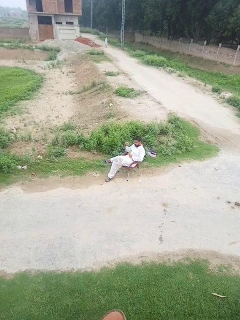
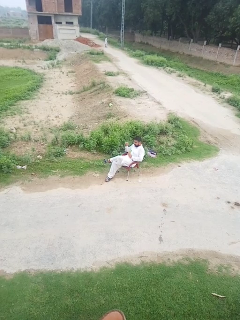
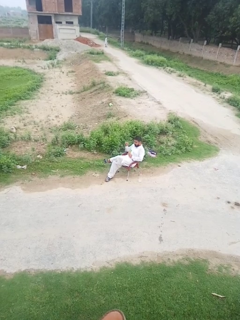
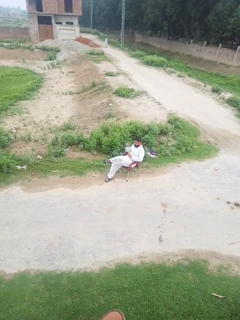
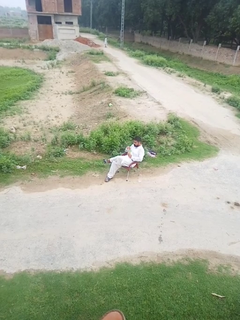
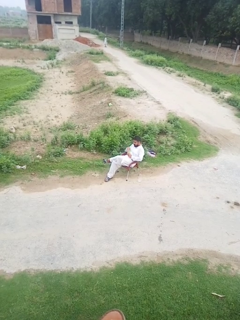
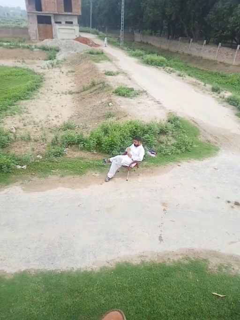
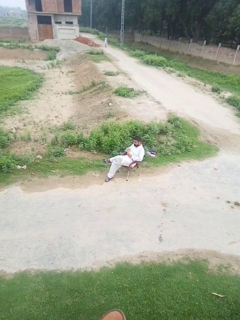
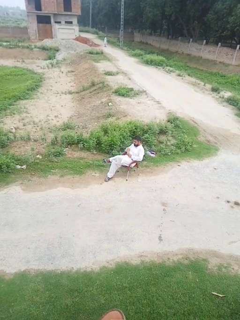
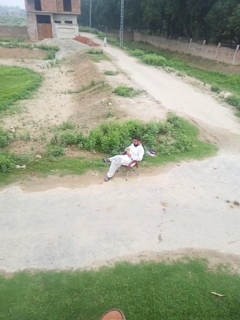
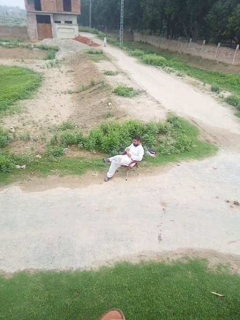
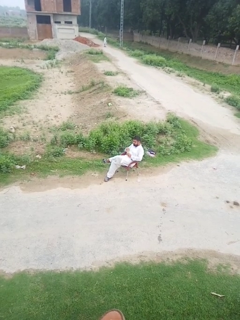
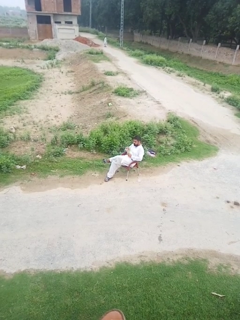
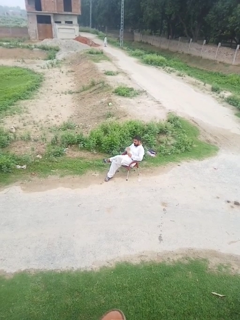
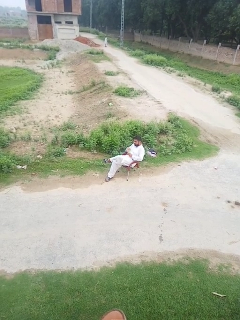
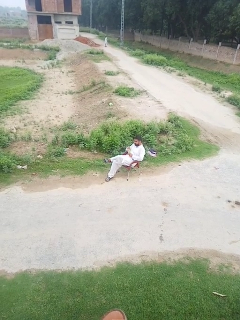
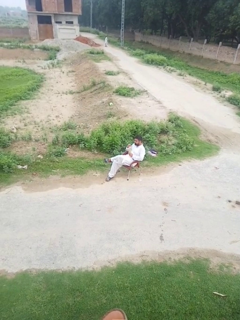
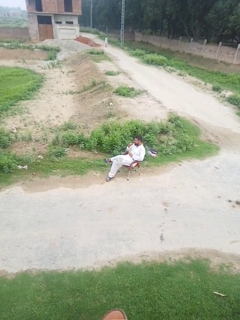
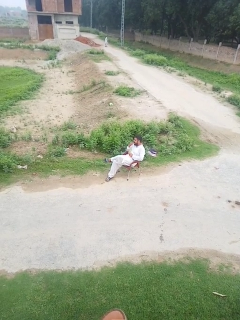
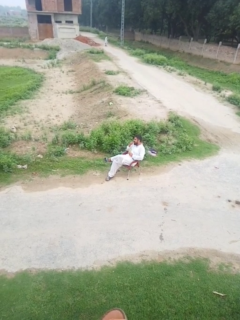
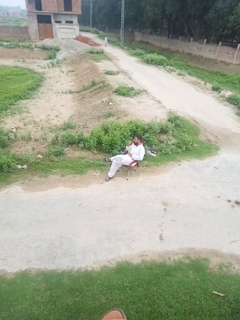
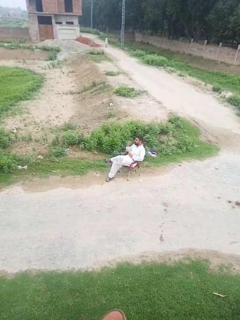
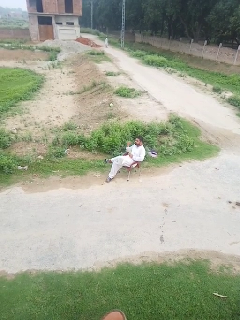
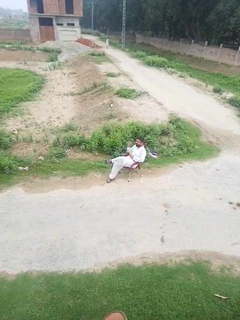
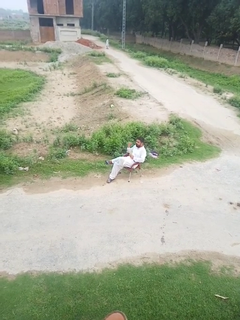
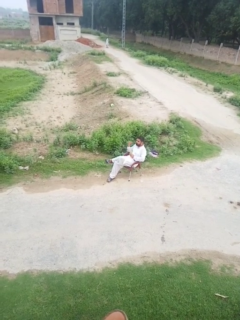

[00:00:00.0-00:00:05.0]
person eats snack from bag

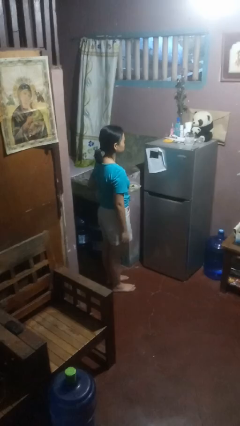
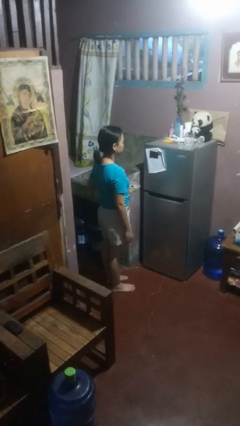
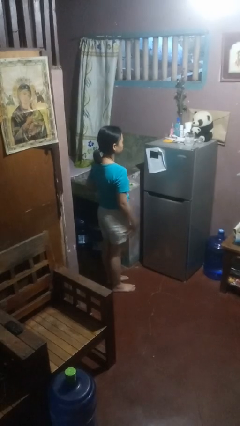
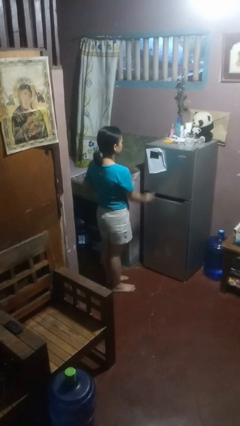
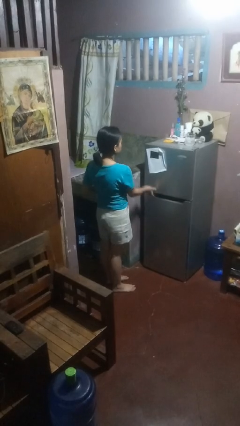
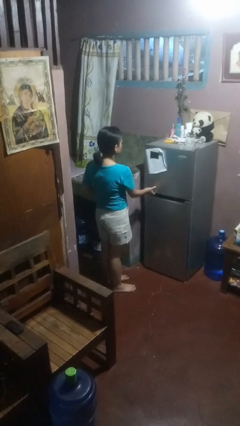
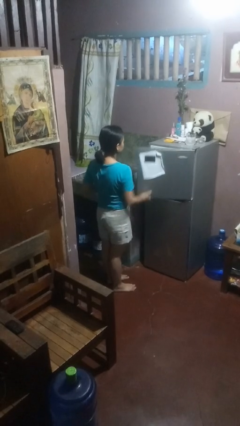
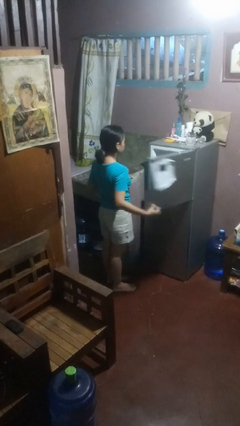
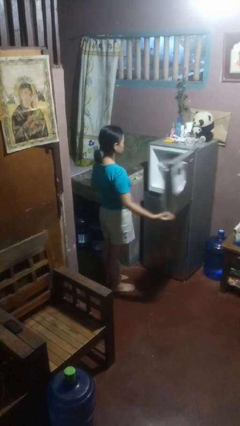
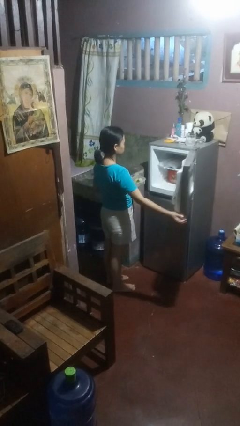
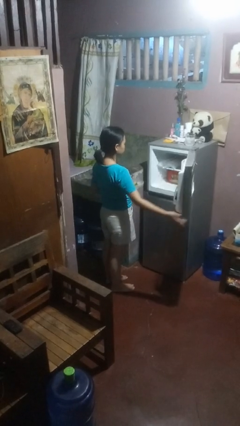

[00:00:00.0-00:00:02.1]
person opens refrigerator

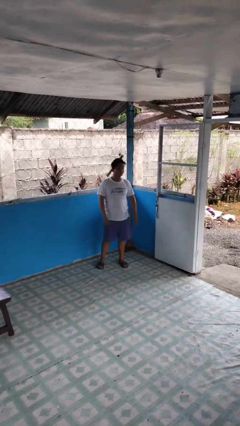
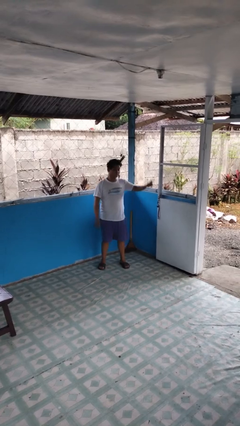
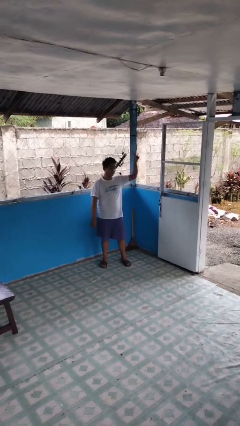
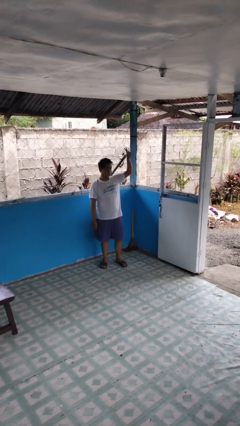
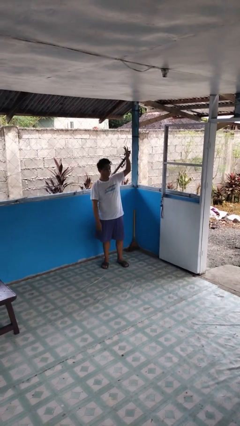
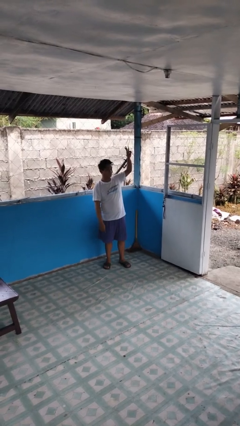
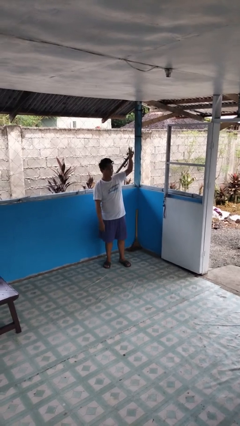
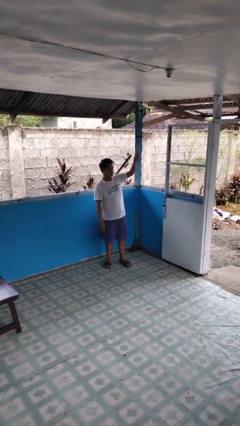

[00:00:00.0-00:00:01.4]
person gestures number three

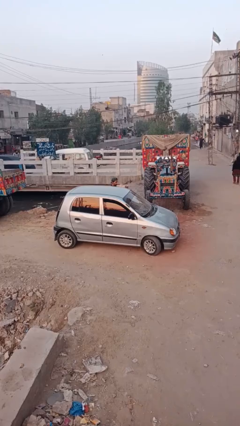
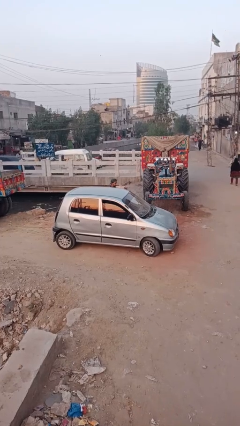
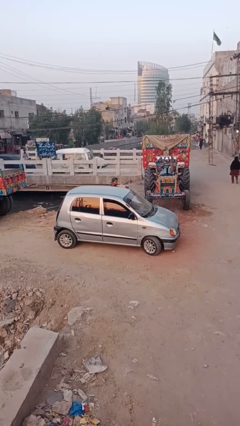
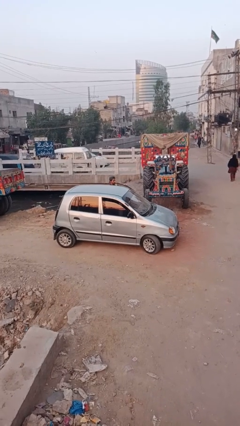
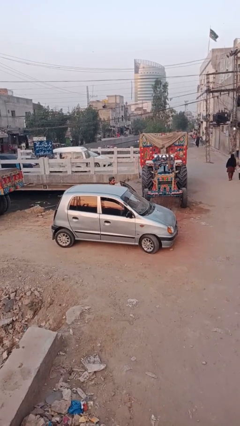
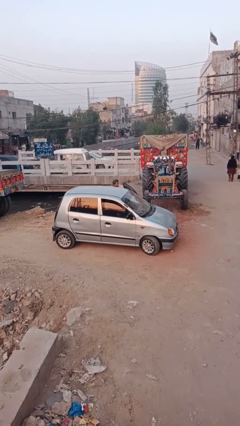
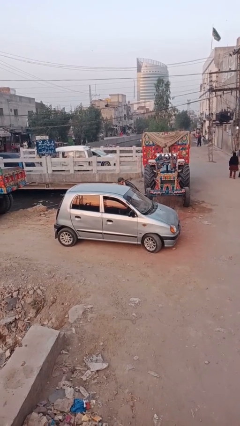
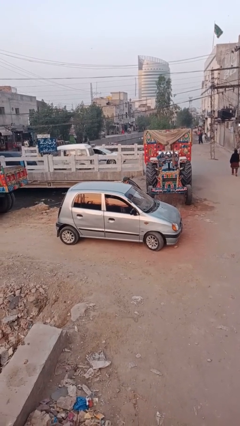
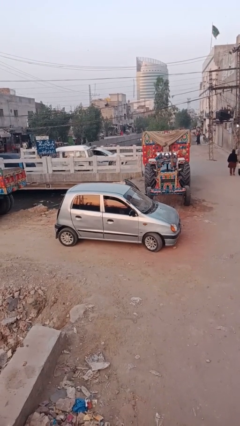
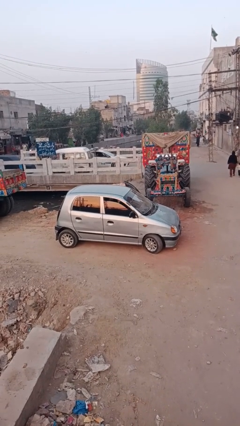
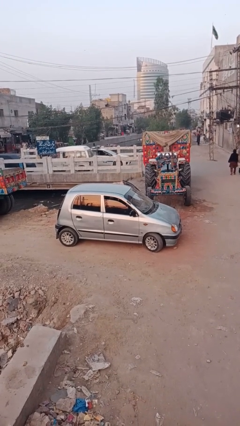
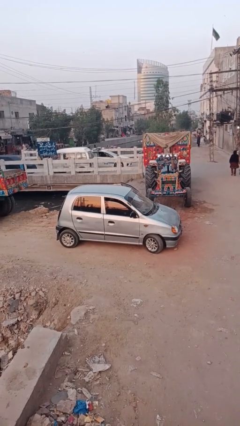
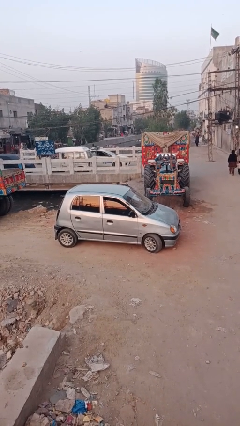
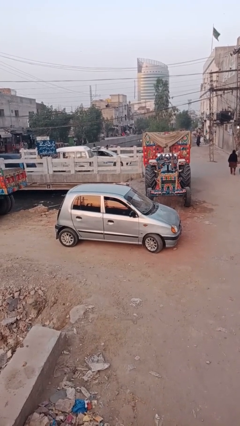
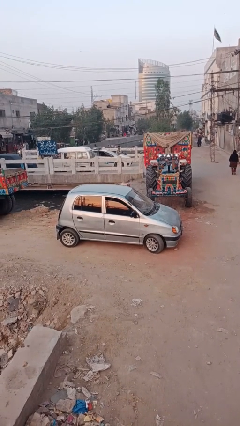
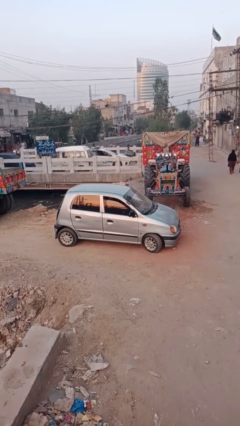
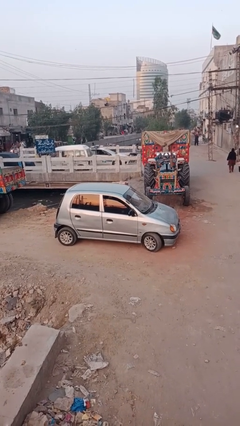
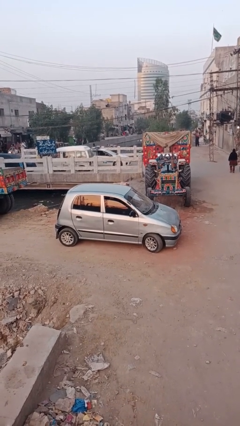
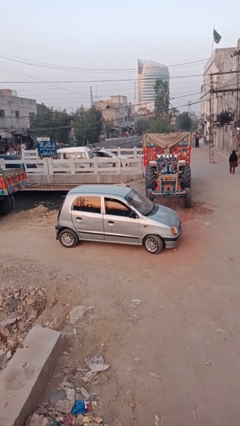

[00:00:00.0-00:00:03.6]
car picks up person

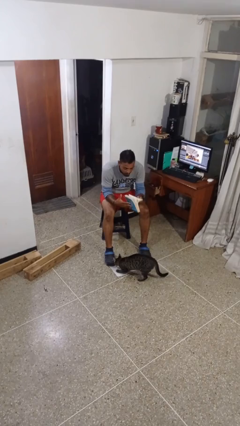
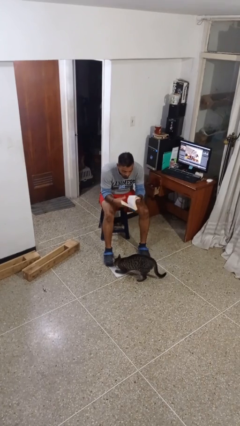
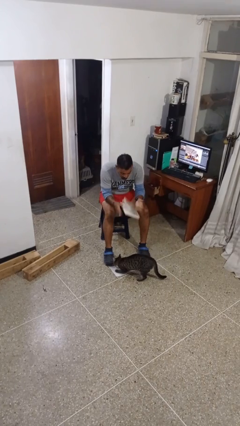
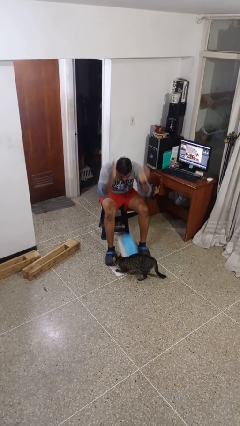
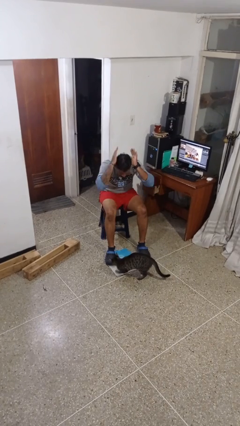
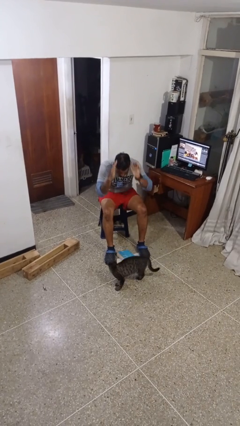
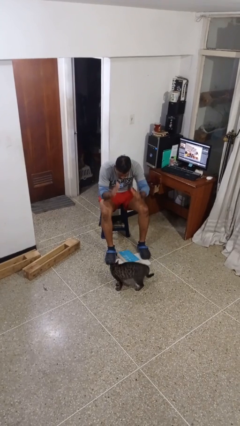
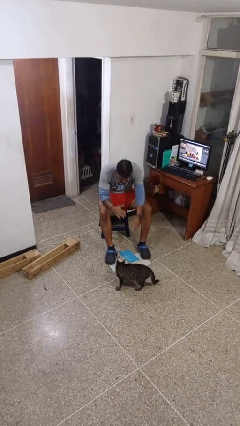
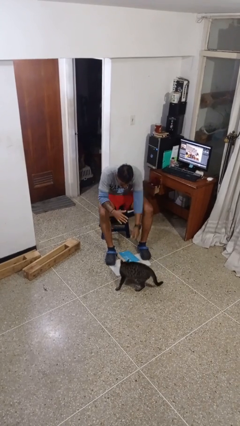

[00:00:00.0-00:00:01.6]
person drops object

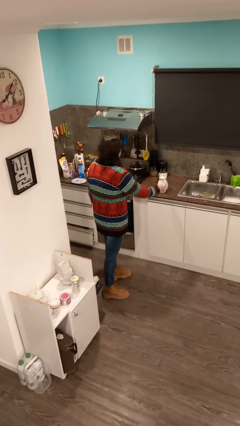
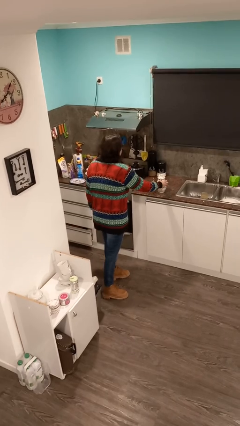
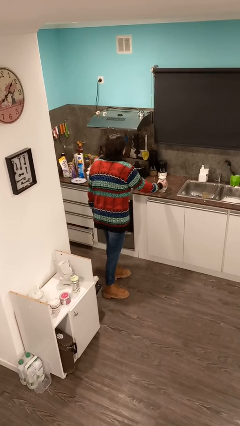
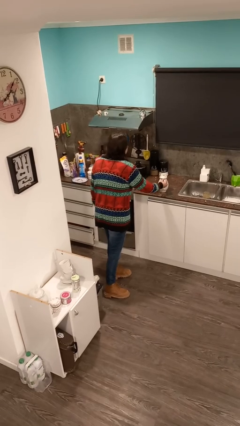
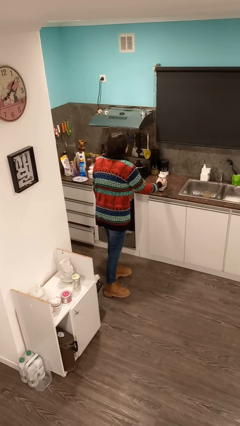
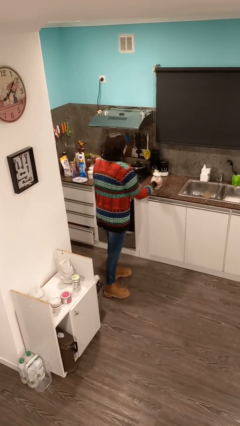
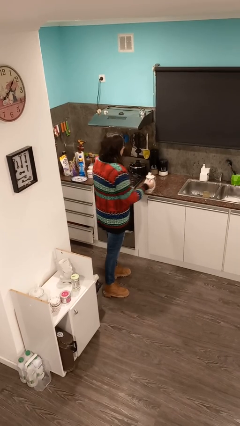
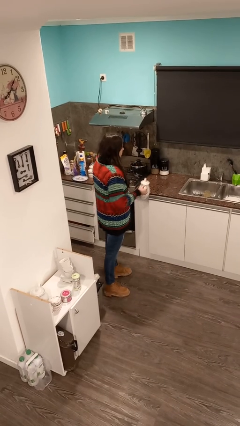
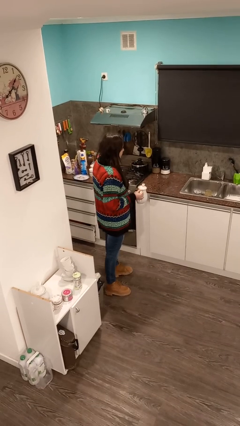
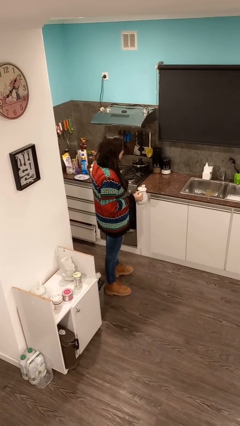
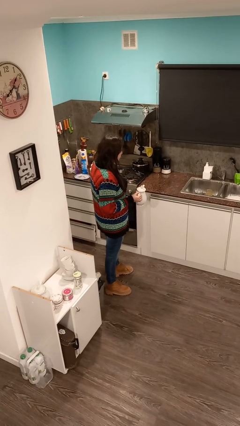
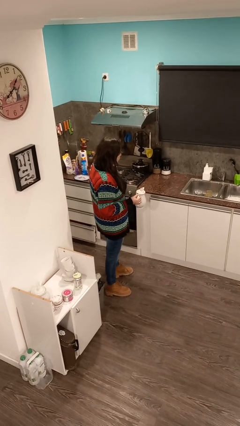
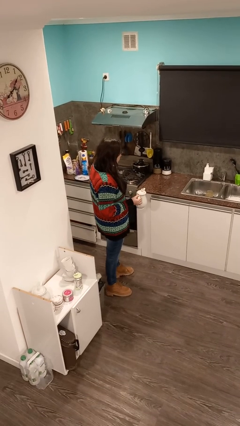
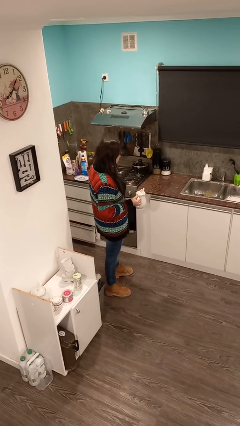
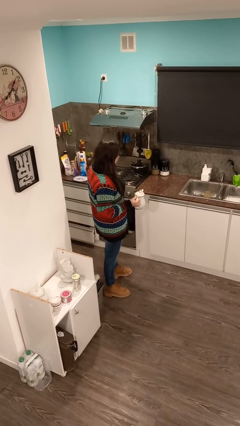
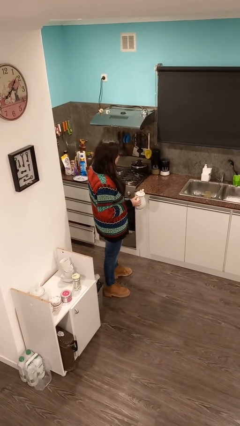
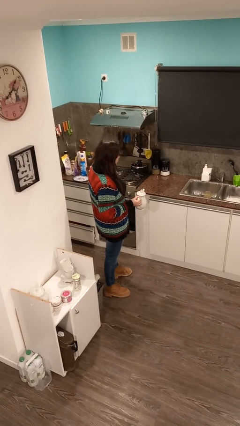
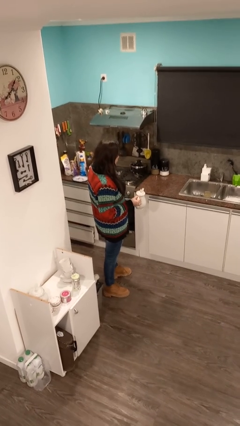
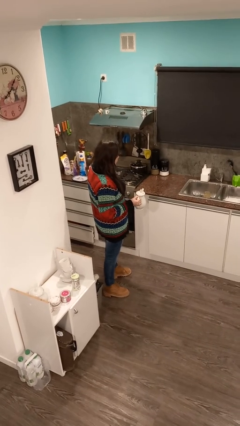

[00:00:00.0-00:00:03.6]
person picks up object from countertop

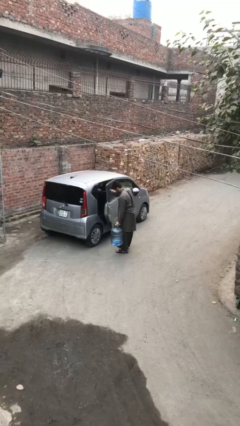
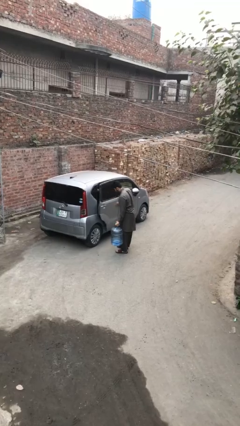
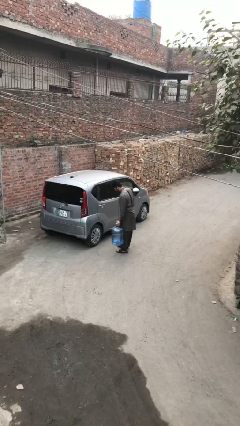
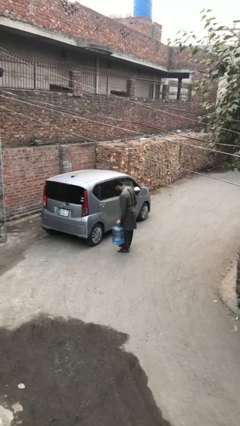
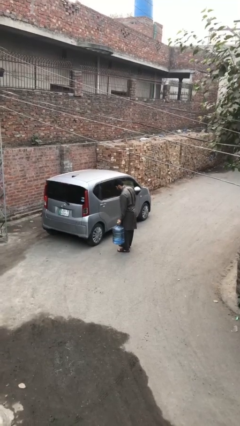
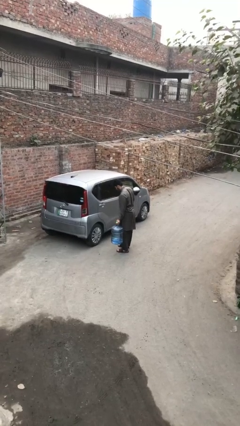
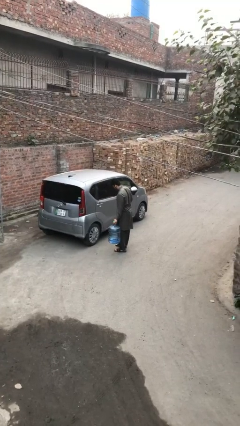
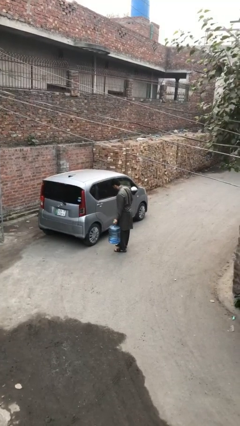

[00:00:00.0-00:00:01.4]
person closes car door
